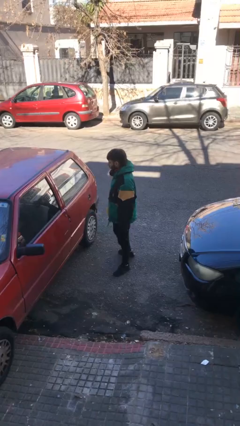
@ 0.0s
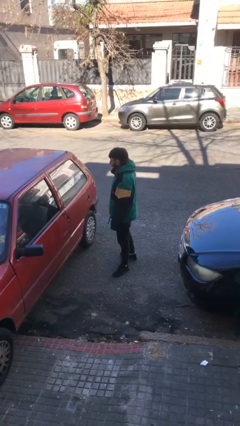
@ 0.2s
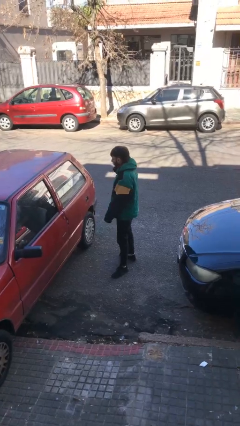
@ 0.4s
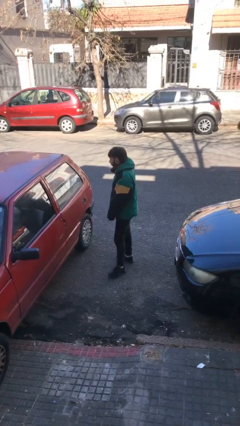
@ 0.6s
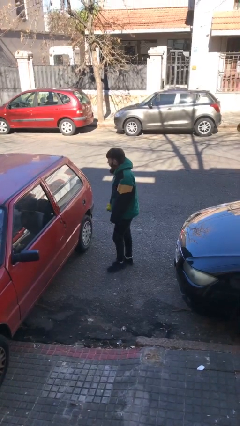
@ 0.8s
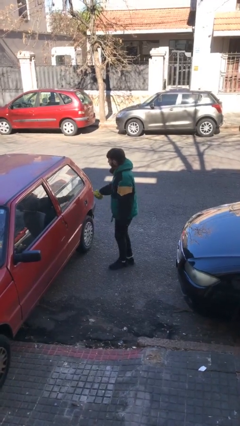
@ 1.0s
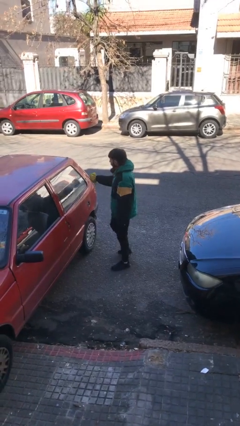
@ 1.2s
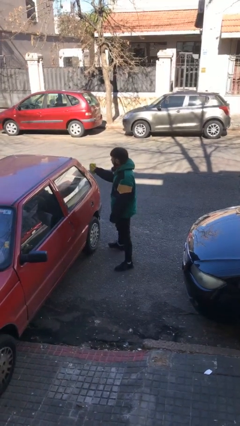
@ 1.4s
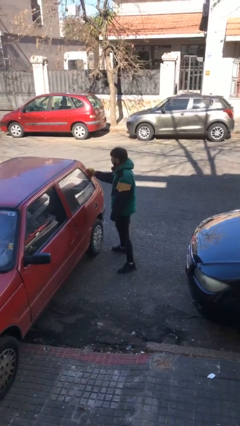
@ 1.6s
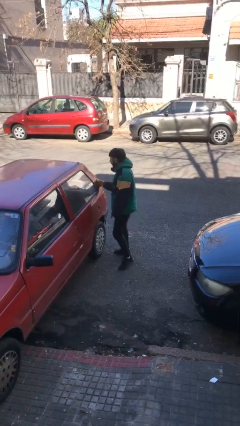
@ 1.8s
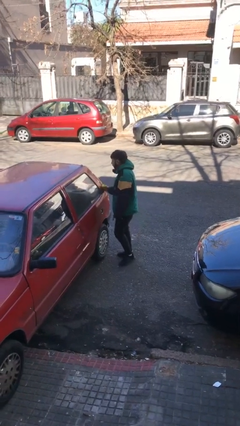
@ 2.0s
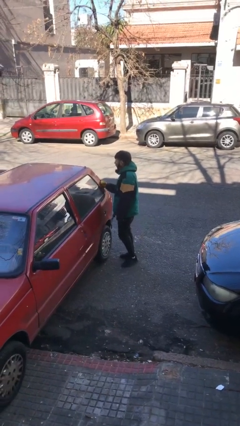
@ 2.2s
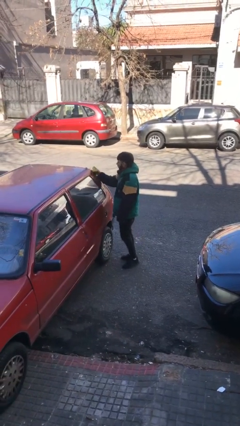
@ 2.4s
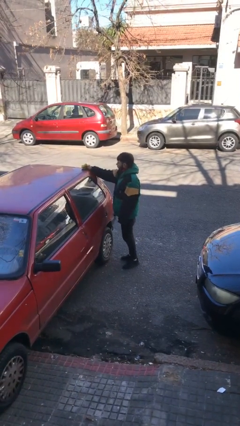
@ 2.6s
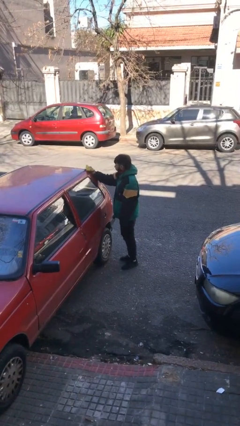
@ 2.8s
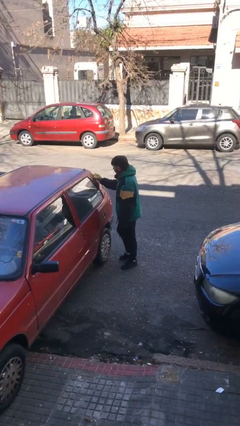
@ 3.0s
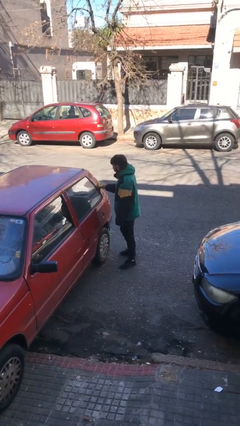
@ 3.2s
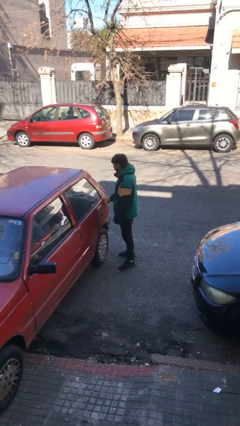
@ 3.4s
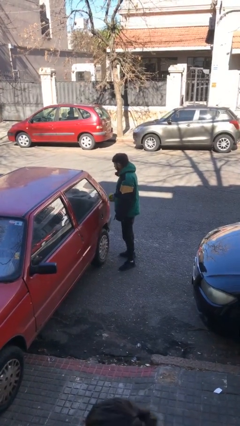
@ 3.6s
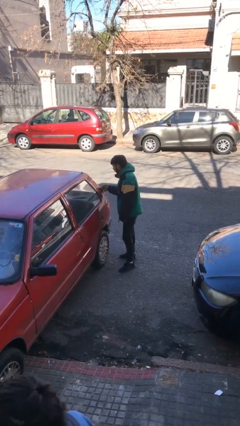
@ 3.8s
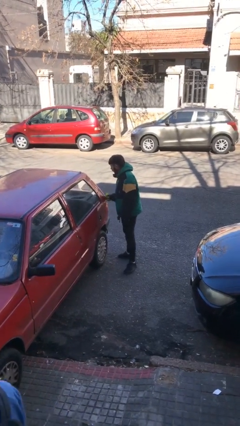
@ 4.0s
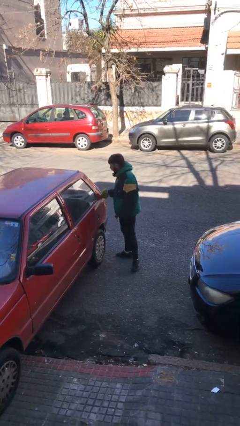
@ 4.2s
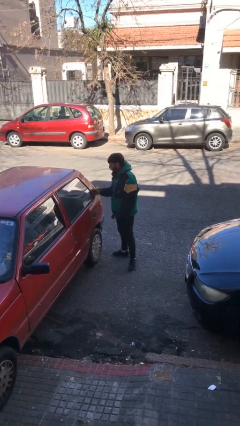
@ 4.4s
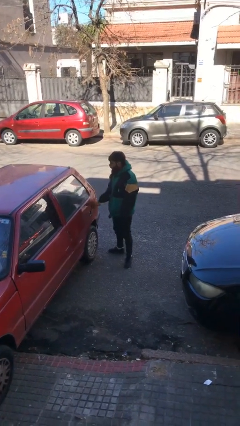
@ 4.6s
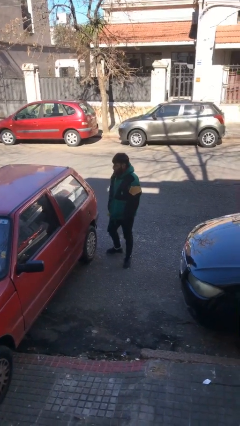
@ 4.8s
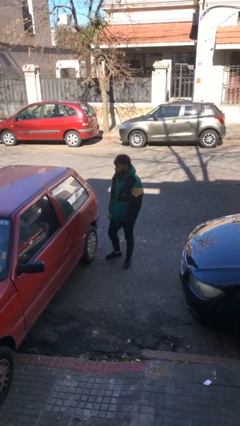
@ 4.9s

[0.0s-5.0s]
person polishes car with rag

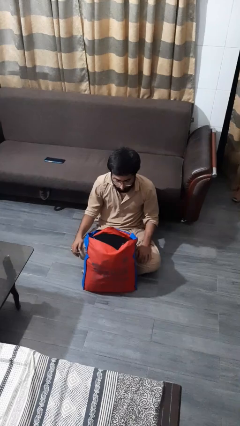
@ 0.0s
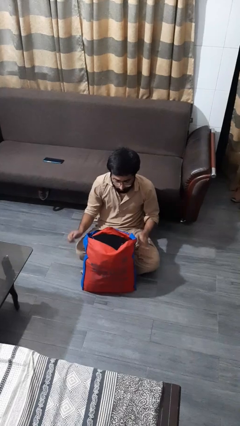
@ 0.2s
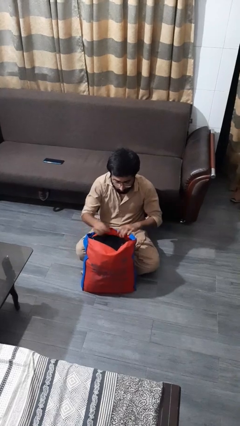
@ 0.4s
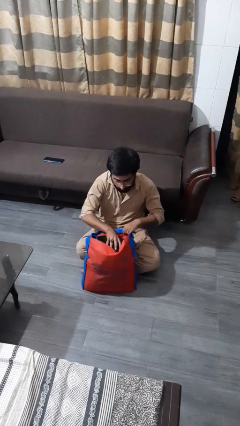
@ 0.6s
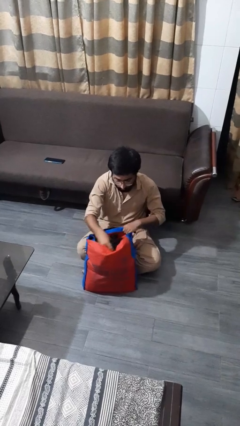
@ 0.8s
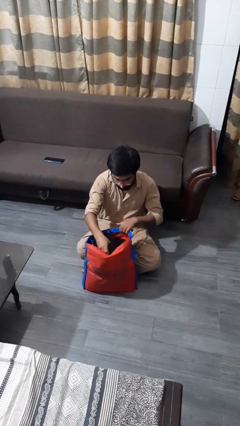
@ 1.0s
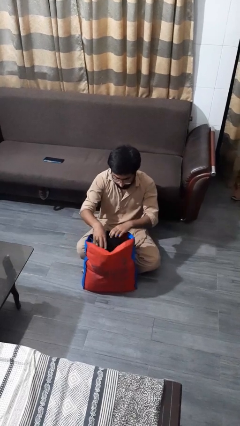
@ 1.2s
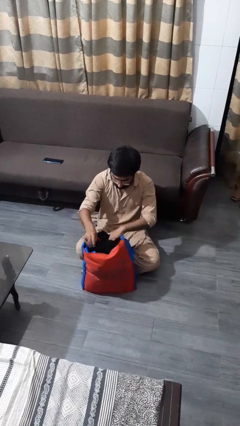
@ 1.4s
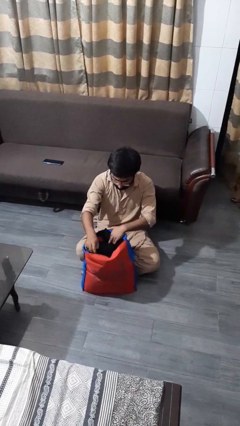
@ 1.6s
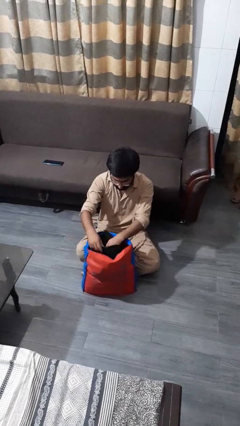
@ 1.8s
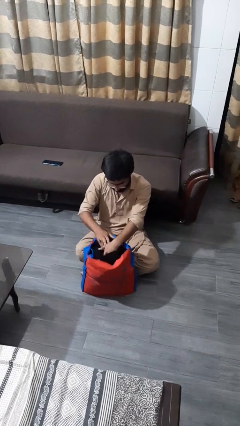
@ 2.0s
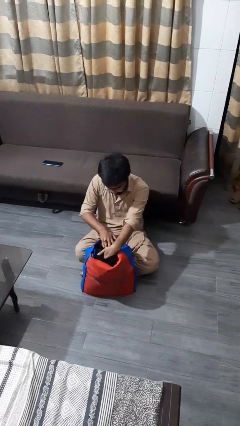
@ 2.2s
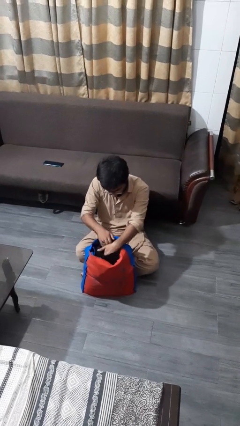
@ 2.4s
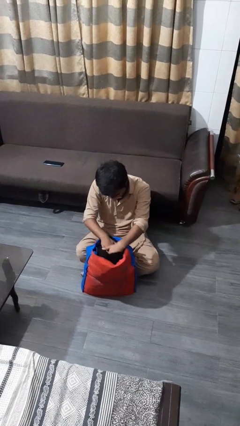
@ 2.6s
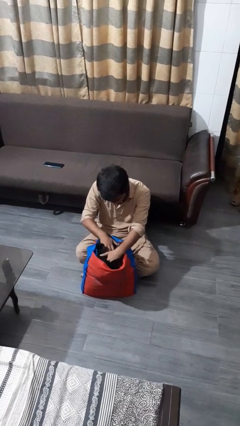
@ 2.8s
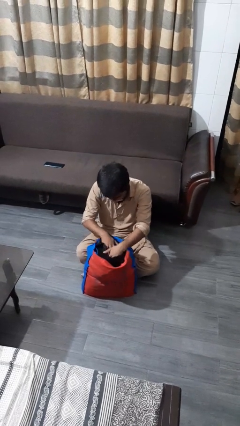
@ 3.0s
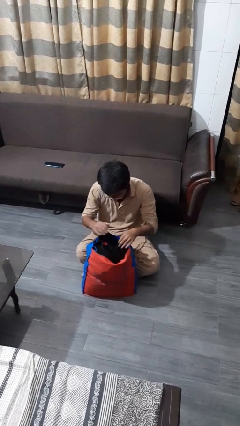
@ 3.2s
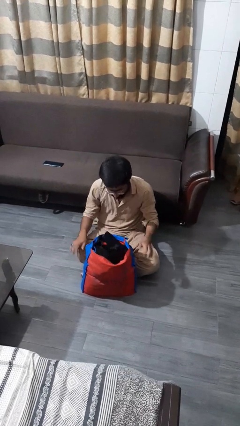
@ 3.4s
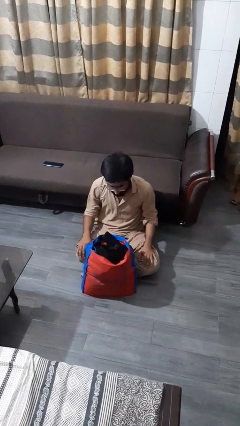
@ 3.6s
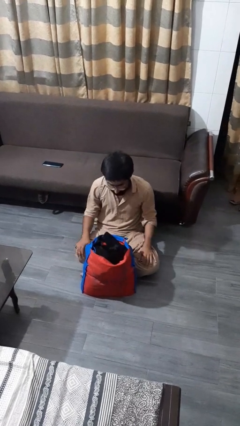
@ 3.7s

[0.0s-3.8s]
person searches in bag

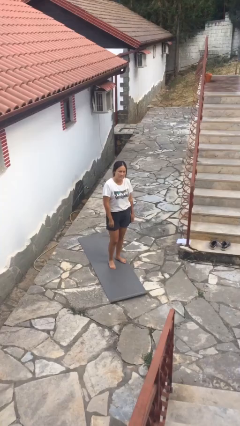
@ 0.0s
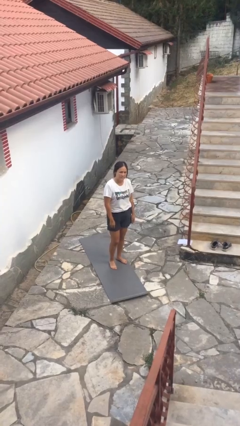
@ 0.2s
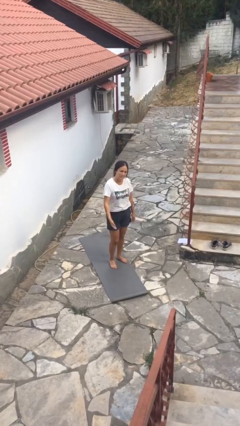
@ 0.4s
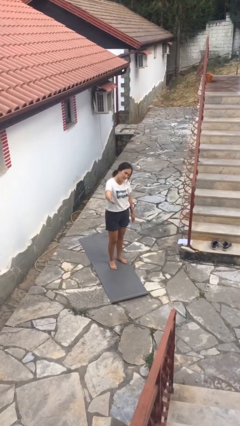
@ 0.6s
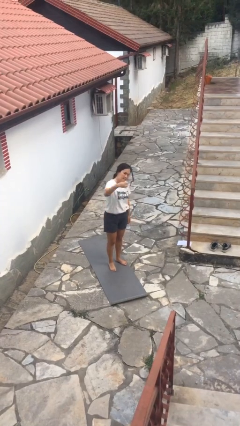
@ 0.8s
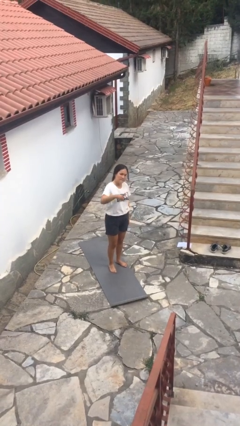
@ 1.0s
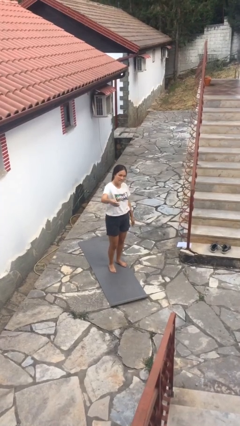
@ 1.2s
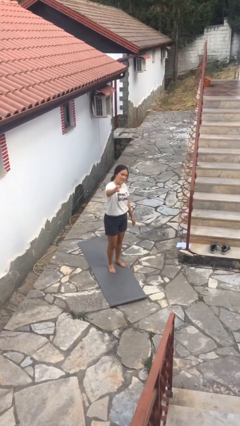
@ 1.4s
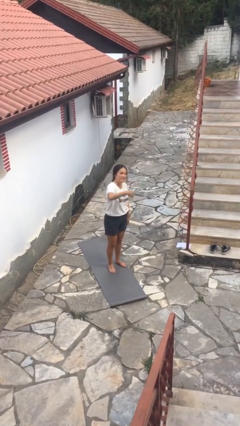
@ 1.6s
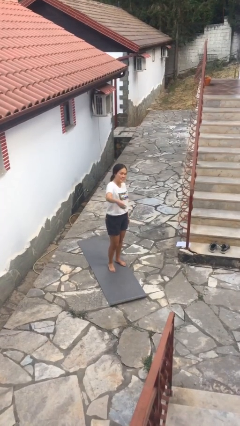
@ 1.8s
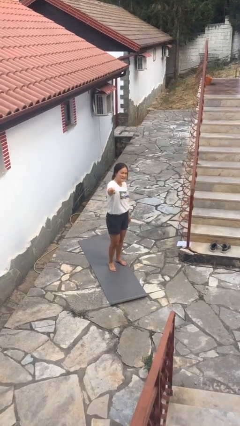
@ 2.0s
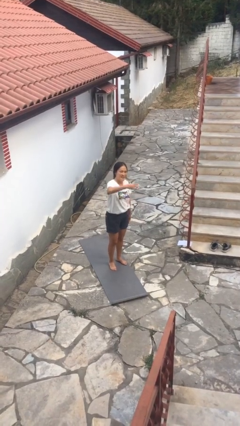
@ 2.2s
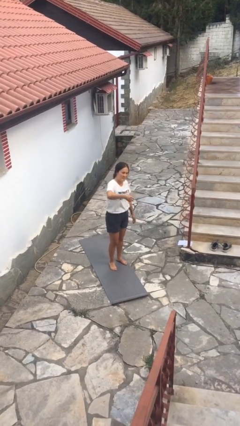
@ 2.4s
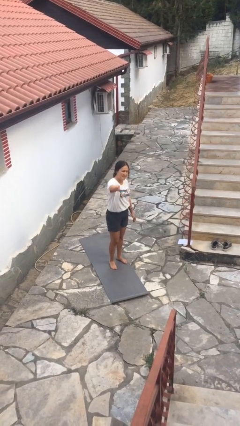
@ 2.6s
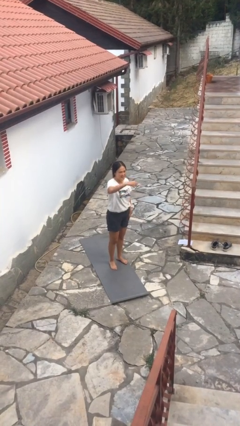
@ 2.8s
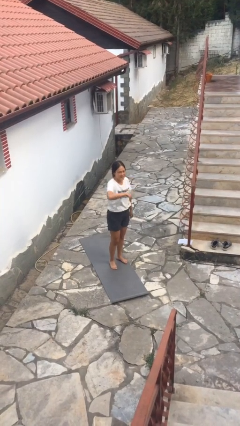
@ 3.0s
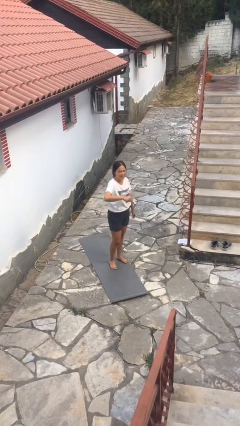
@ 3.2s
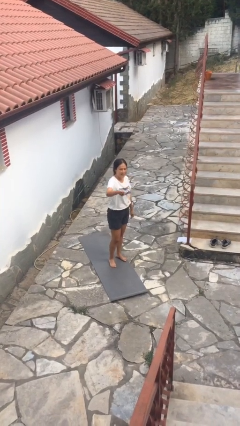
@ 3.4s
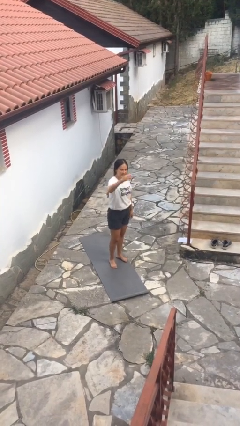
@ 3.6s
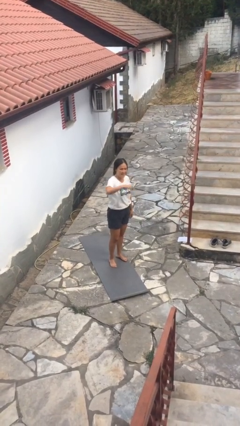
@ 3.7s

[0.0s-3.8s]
person gestures come here

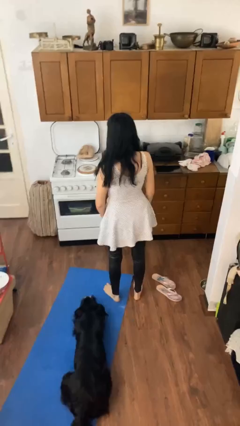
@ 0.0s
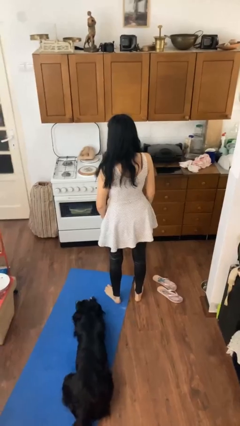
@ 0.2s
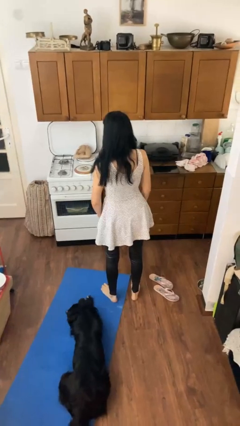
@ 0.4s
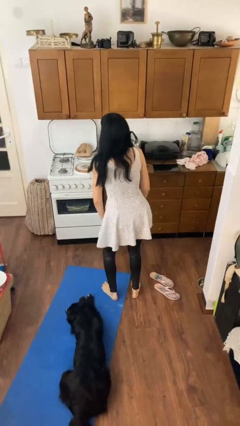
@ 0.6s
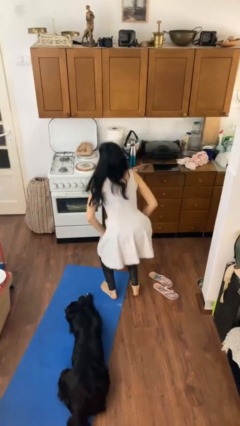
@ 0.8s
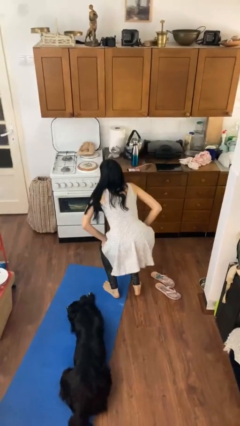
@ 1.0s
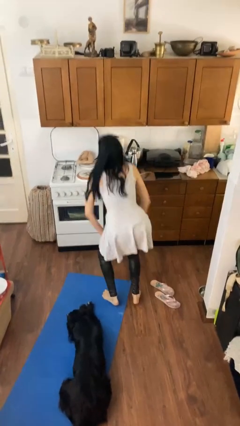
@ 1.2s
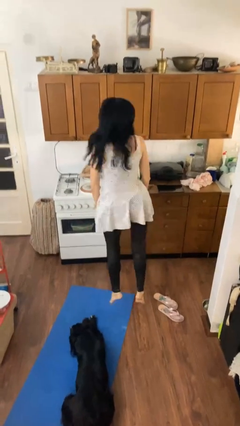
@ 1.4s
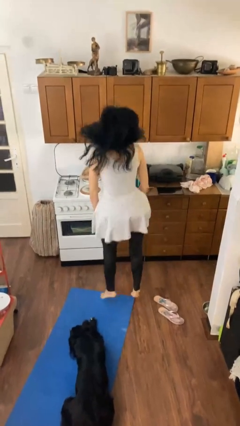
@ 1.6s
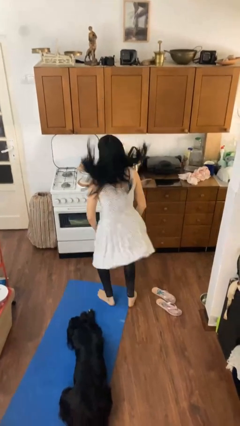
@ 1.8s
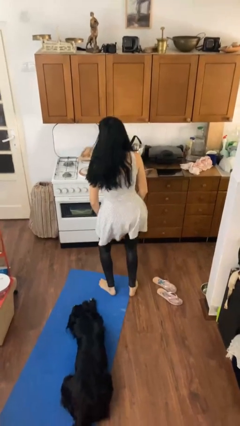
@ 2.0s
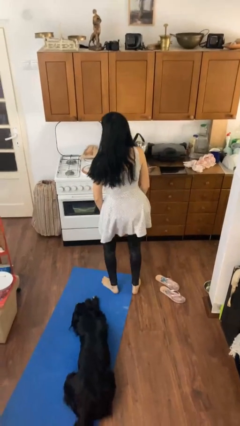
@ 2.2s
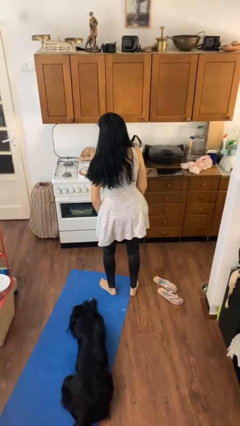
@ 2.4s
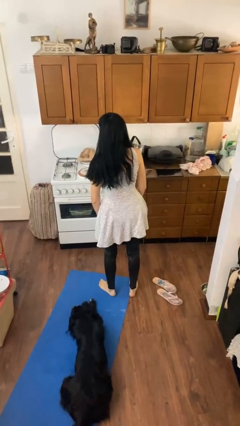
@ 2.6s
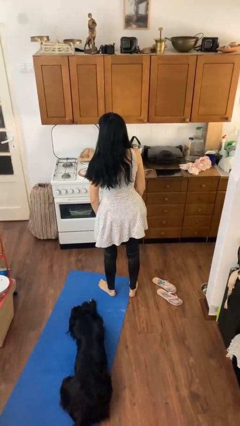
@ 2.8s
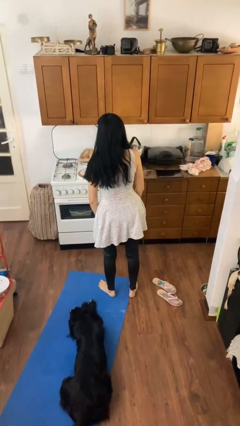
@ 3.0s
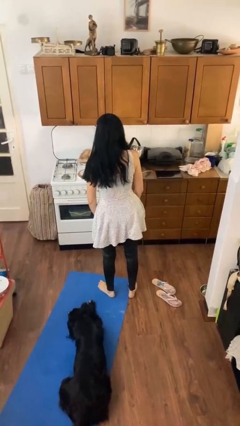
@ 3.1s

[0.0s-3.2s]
person jumps

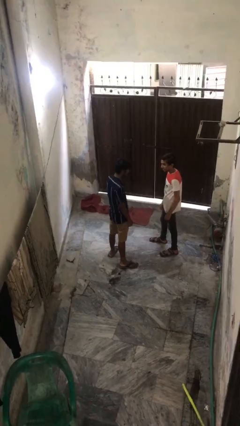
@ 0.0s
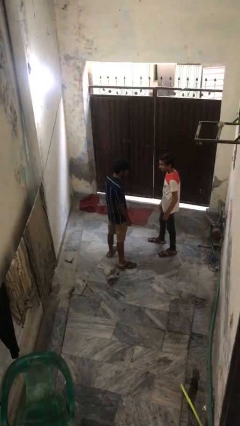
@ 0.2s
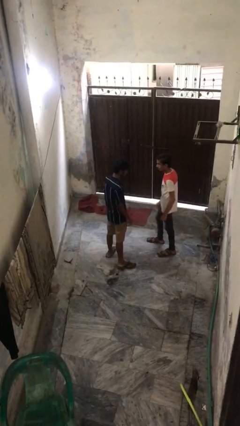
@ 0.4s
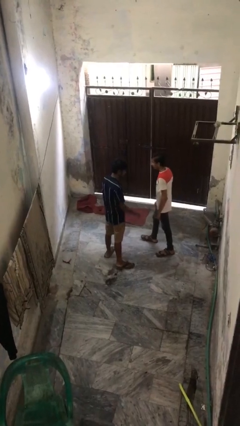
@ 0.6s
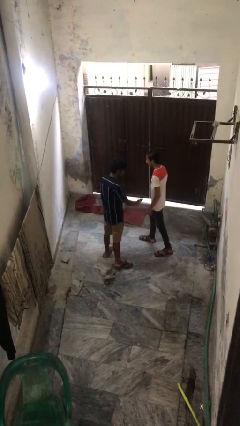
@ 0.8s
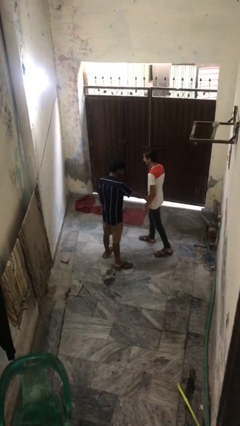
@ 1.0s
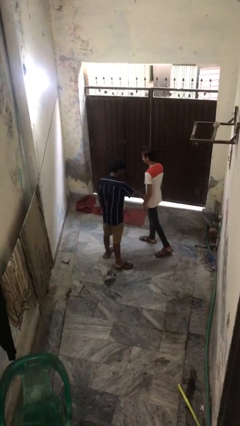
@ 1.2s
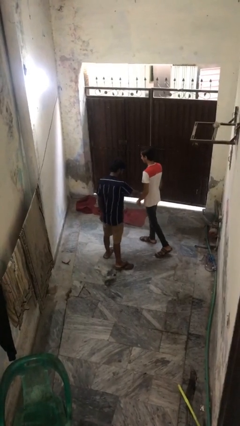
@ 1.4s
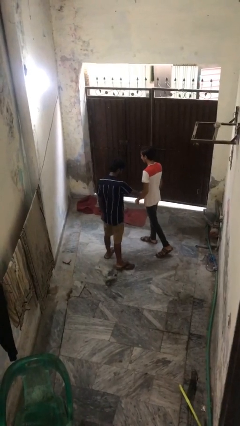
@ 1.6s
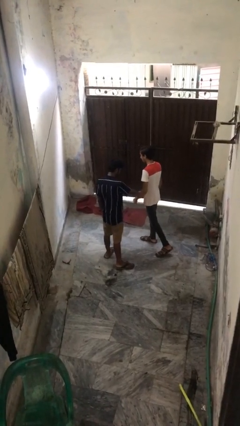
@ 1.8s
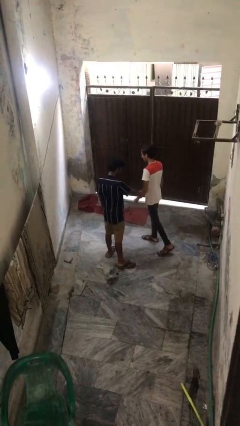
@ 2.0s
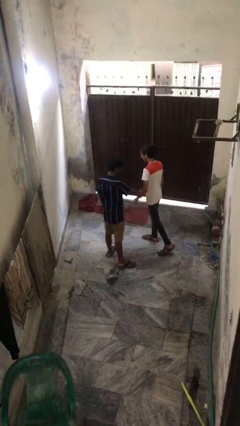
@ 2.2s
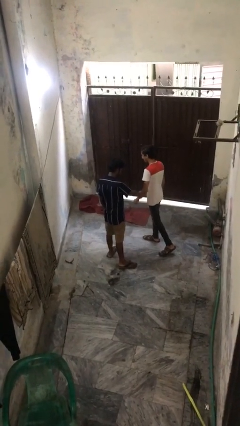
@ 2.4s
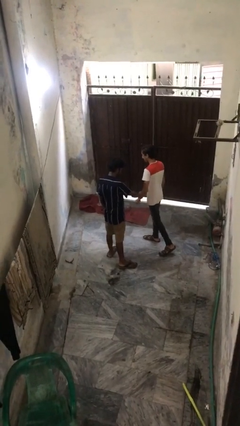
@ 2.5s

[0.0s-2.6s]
person grabs person by forearm
